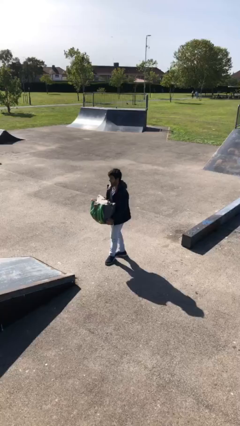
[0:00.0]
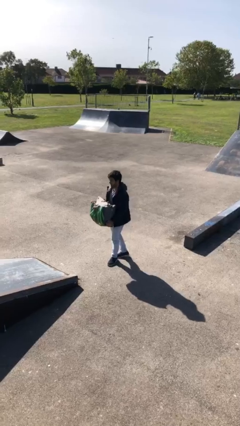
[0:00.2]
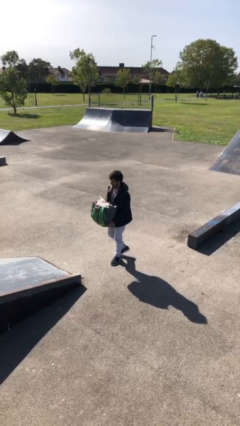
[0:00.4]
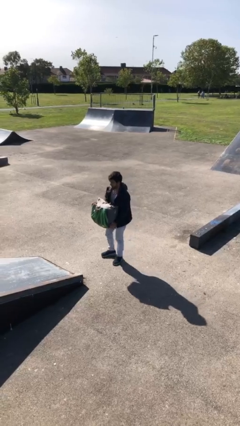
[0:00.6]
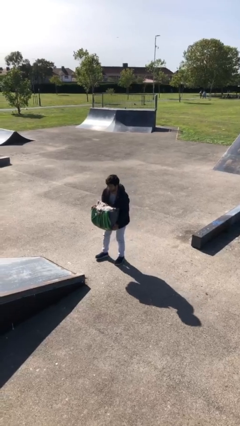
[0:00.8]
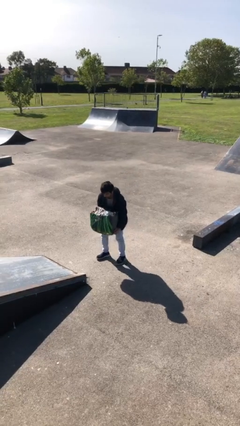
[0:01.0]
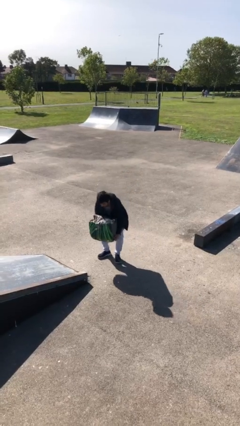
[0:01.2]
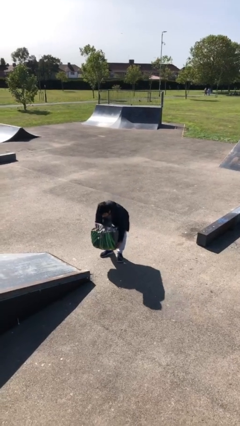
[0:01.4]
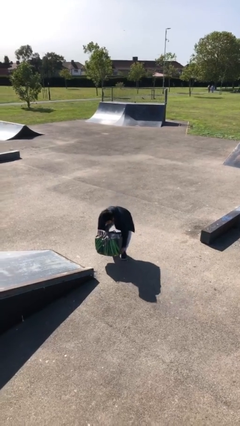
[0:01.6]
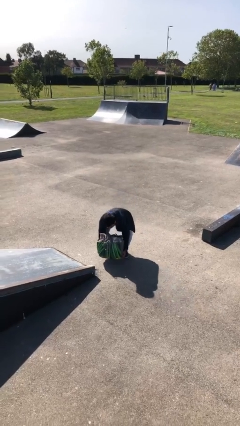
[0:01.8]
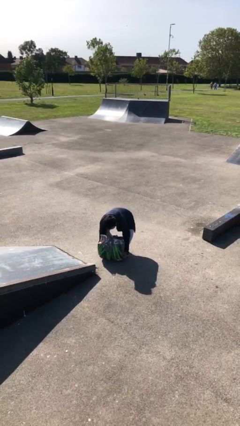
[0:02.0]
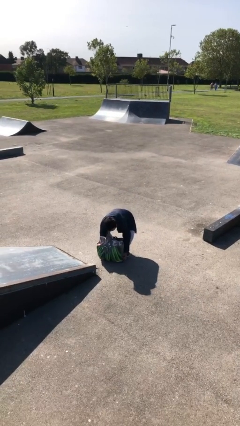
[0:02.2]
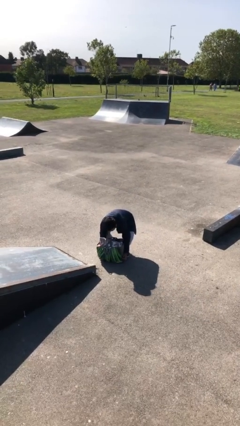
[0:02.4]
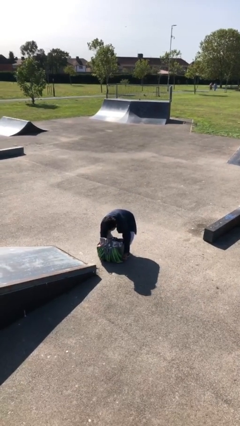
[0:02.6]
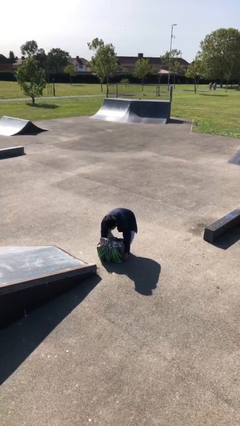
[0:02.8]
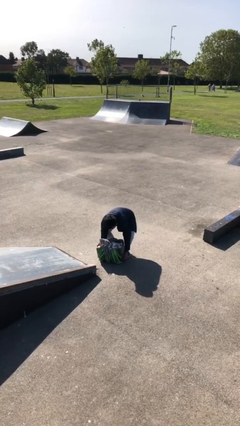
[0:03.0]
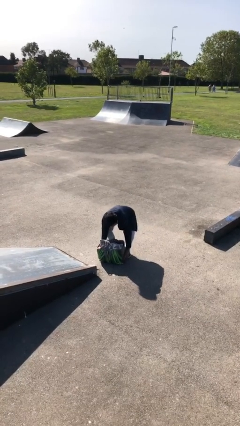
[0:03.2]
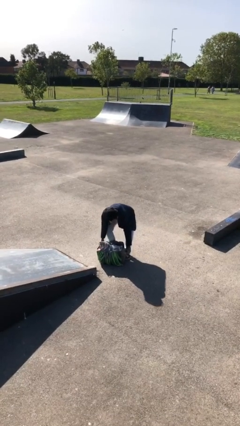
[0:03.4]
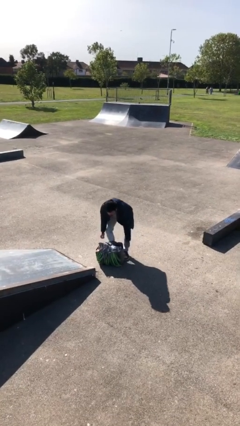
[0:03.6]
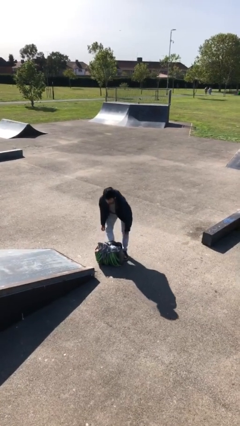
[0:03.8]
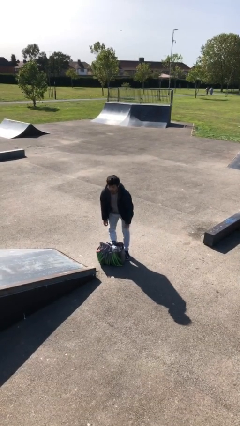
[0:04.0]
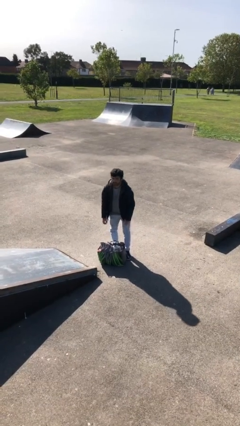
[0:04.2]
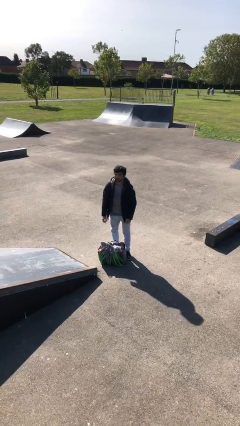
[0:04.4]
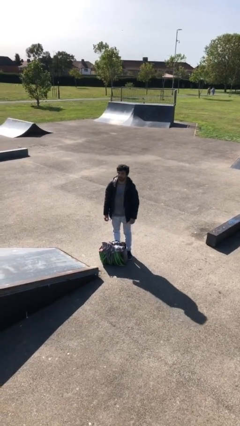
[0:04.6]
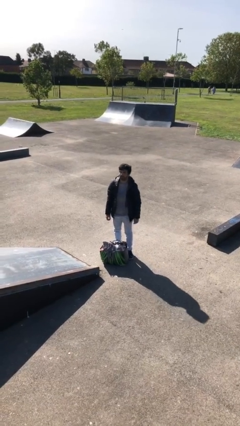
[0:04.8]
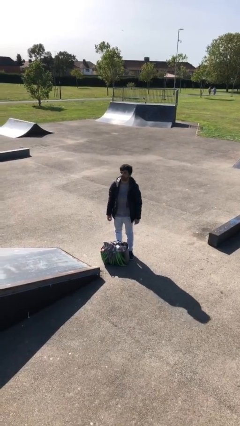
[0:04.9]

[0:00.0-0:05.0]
person puts down object on floor

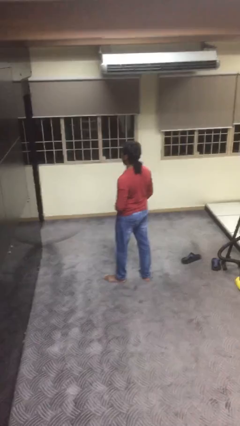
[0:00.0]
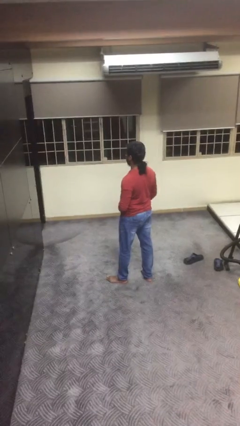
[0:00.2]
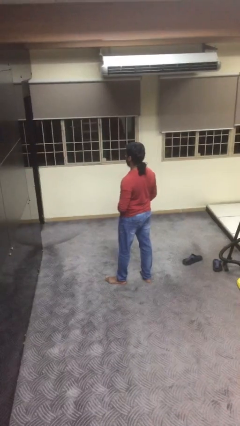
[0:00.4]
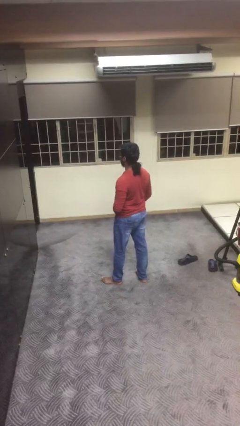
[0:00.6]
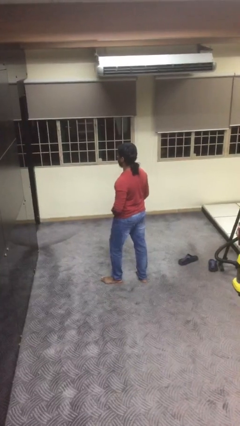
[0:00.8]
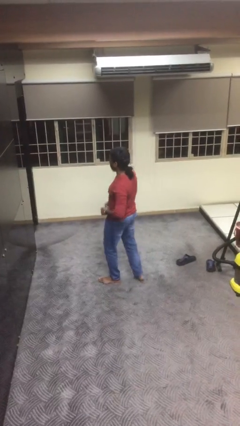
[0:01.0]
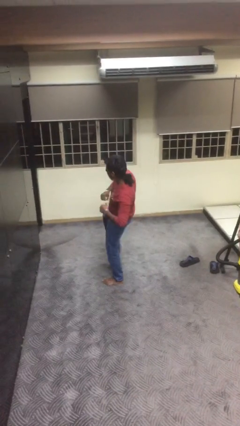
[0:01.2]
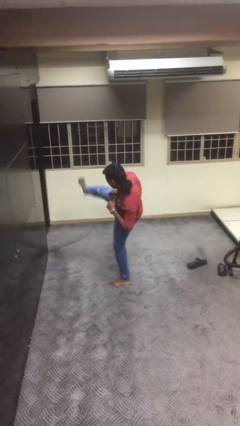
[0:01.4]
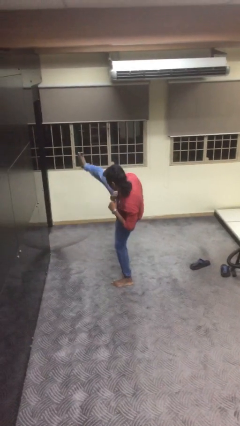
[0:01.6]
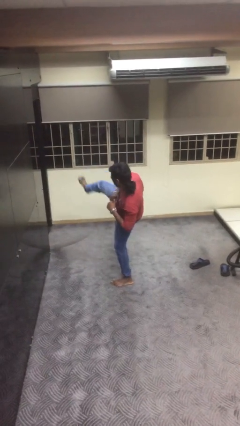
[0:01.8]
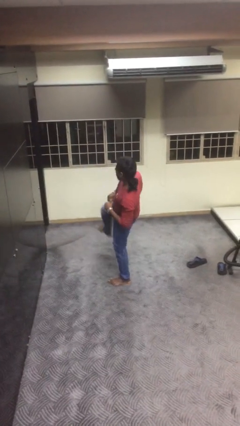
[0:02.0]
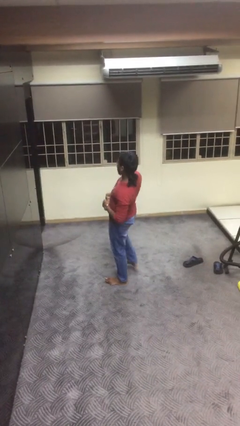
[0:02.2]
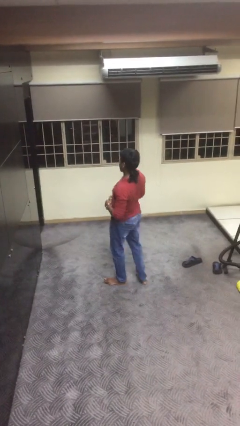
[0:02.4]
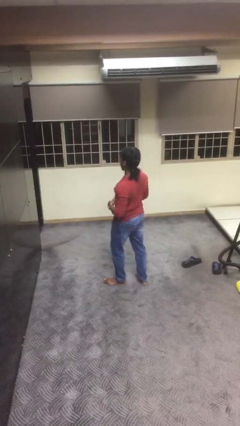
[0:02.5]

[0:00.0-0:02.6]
person karate kicks

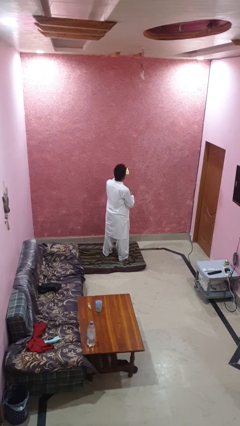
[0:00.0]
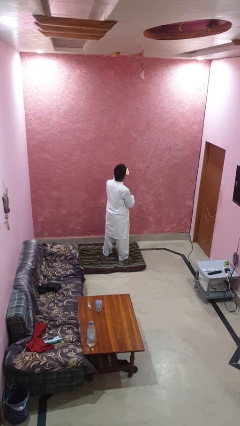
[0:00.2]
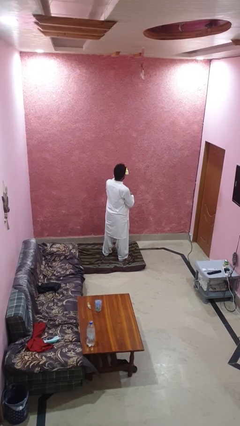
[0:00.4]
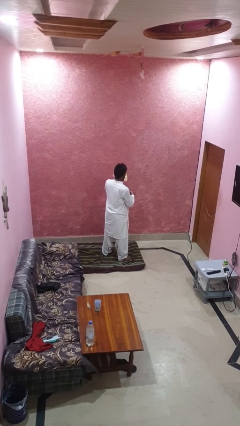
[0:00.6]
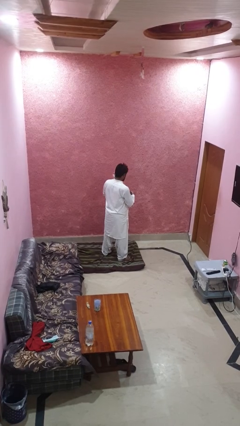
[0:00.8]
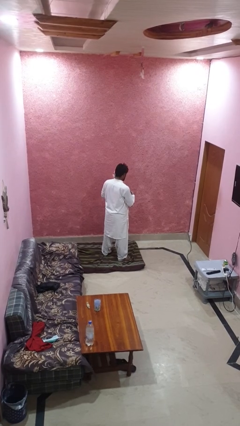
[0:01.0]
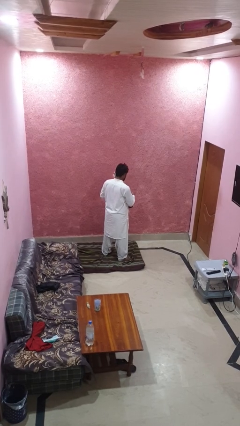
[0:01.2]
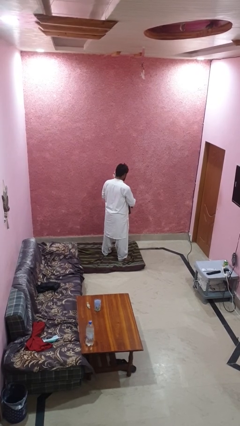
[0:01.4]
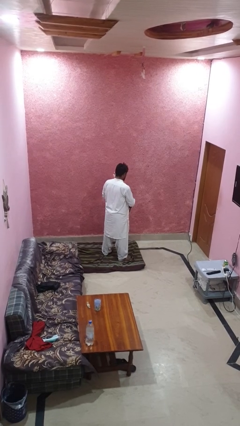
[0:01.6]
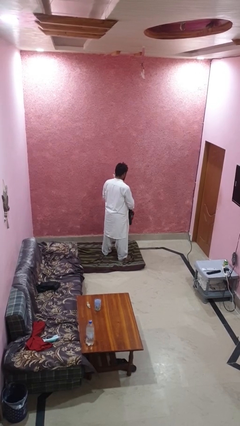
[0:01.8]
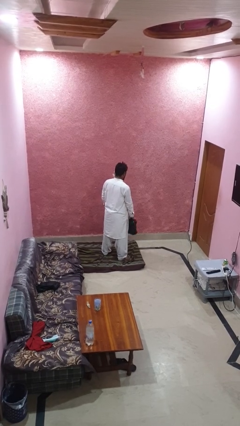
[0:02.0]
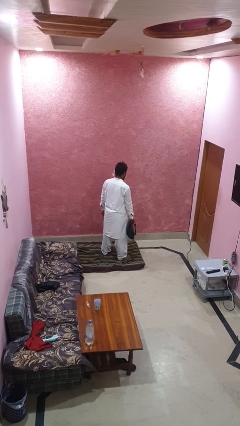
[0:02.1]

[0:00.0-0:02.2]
person puts object into purse

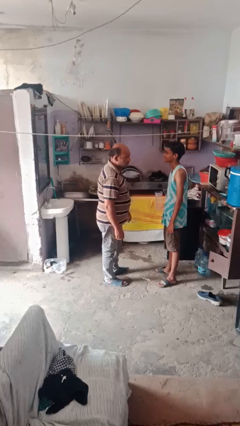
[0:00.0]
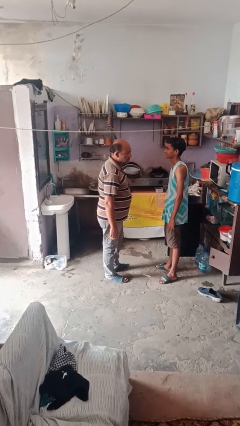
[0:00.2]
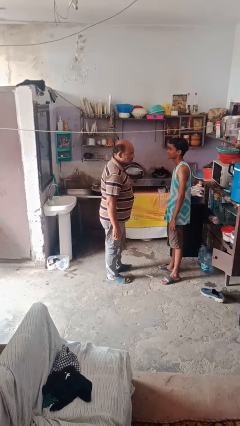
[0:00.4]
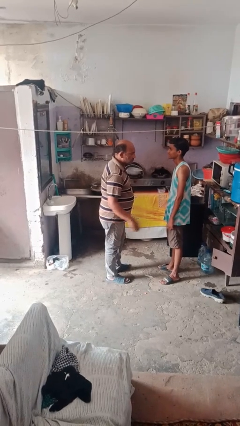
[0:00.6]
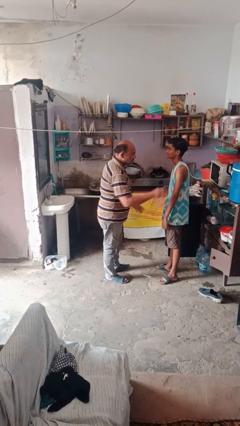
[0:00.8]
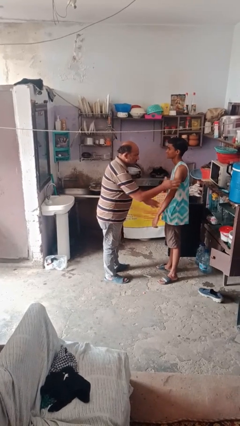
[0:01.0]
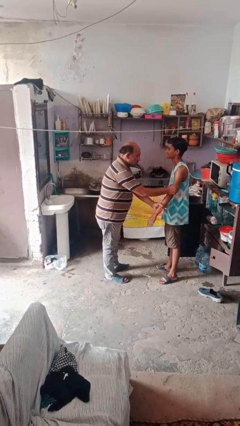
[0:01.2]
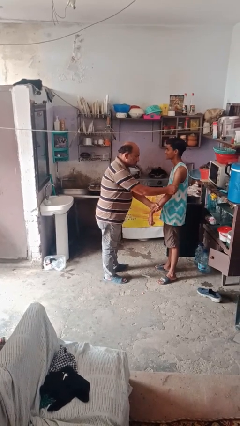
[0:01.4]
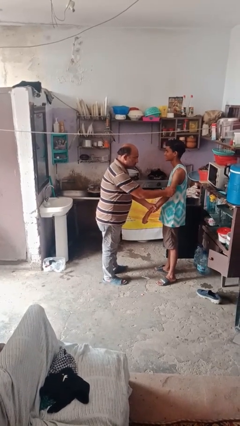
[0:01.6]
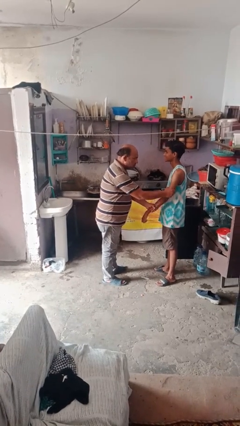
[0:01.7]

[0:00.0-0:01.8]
person grabs person by forearm

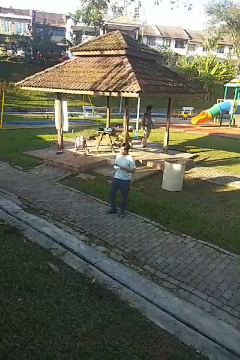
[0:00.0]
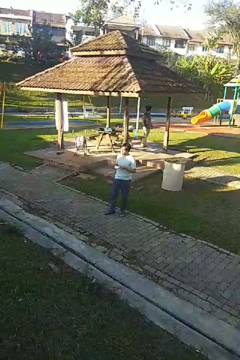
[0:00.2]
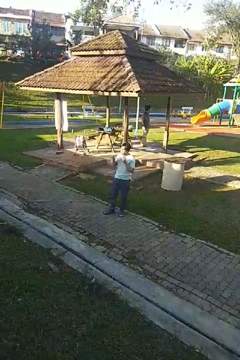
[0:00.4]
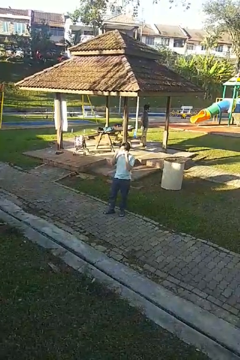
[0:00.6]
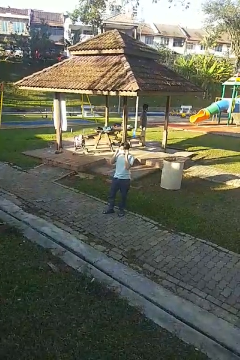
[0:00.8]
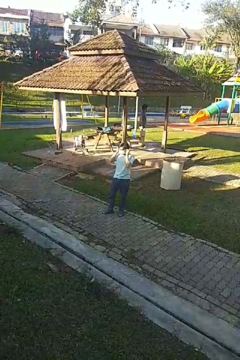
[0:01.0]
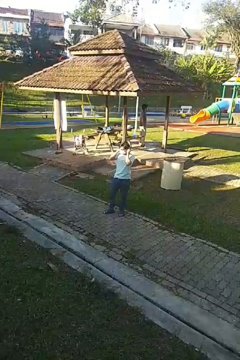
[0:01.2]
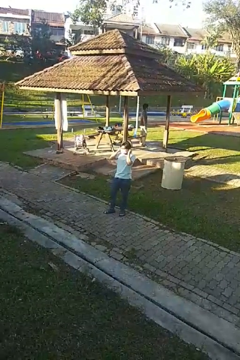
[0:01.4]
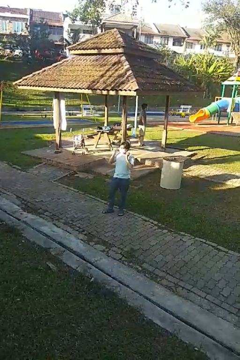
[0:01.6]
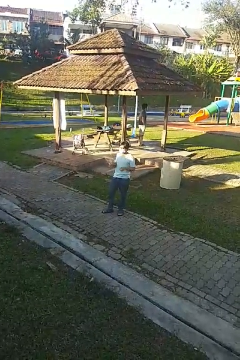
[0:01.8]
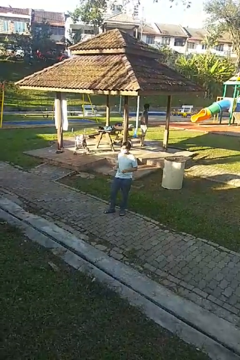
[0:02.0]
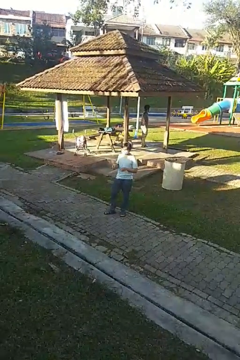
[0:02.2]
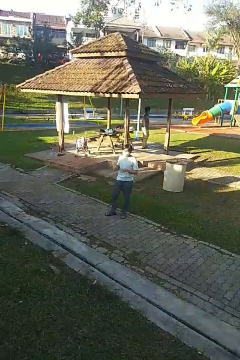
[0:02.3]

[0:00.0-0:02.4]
person puts on facemask

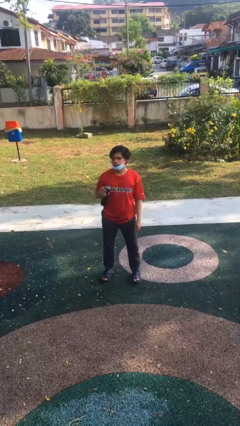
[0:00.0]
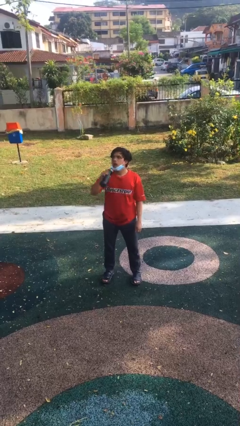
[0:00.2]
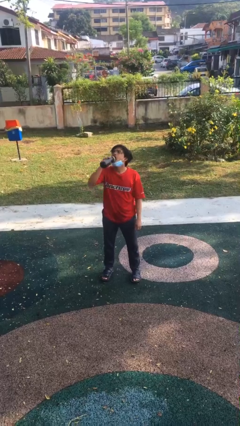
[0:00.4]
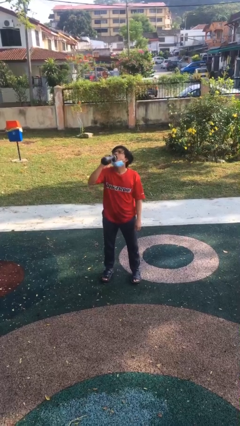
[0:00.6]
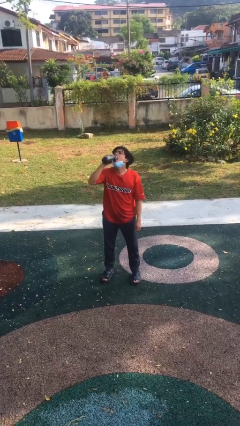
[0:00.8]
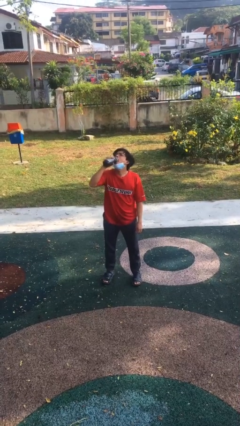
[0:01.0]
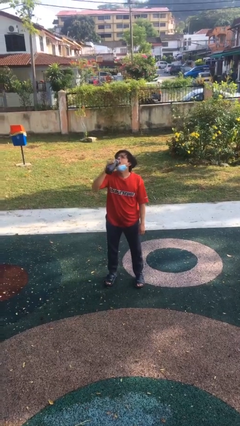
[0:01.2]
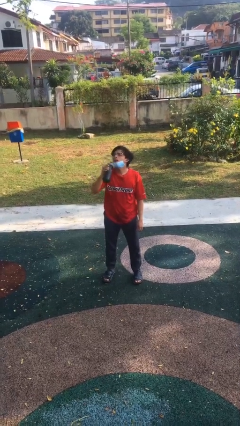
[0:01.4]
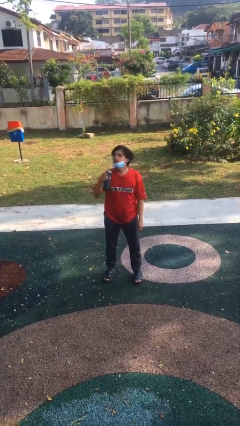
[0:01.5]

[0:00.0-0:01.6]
person drinks from bottle

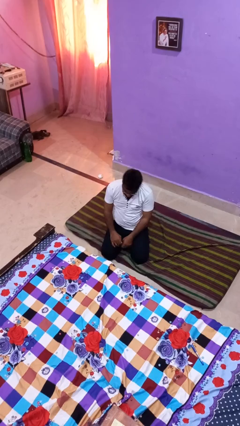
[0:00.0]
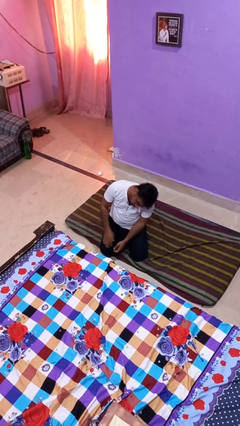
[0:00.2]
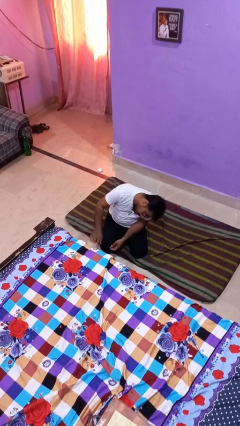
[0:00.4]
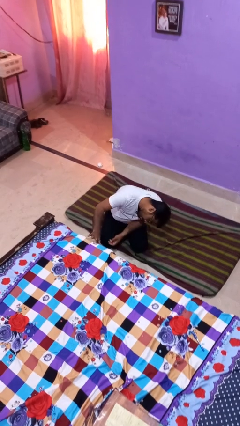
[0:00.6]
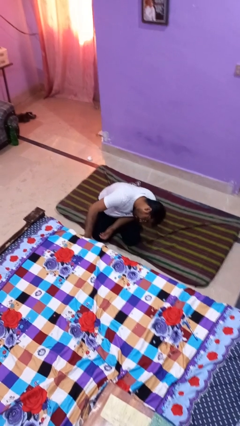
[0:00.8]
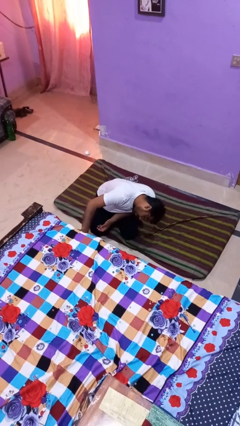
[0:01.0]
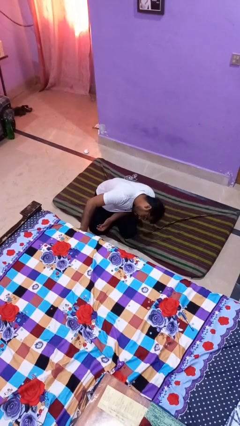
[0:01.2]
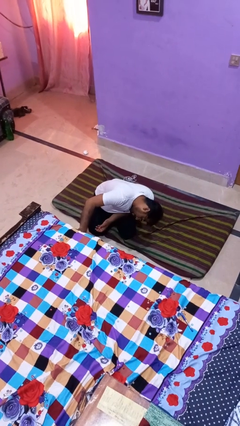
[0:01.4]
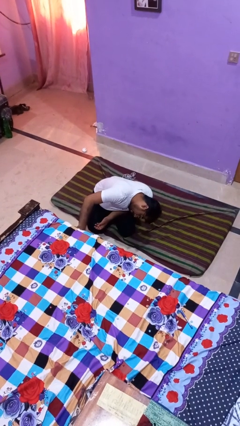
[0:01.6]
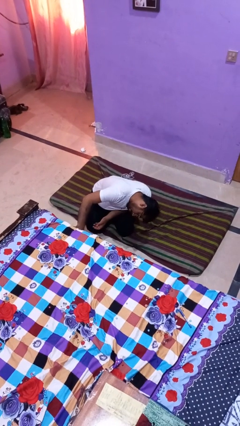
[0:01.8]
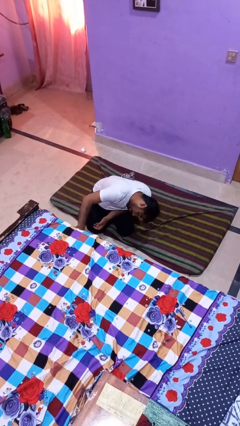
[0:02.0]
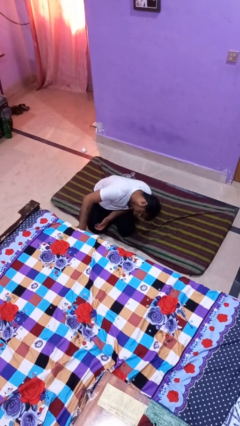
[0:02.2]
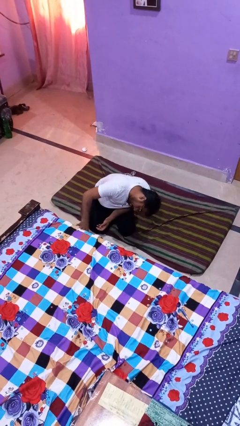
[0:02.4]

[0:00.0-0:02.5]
person searches under bed
